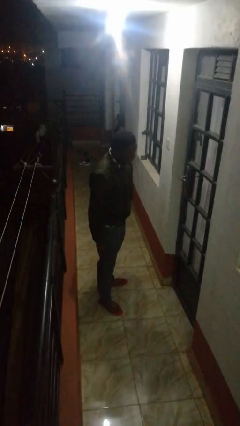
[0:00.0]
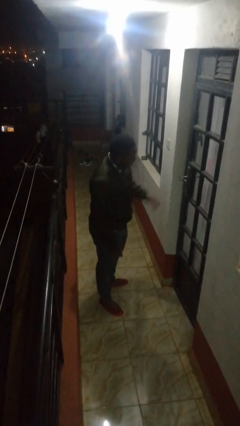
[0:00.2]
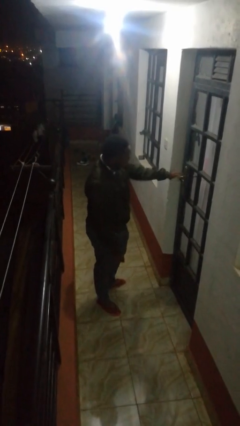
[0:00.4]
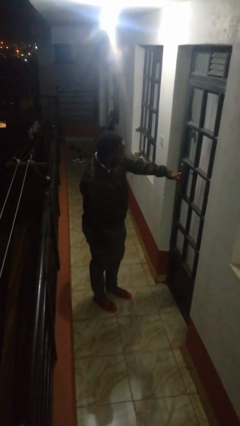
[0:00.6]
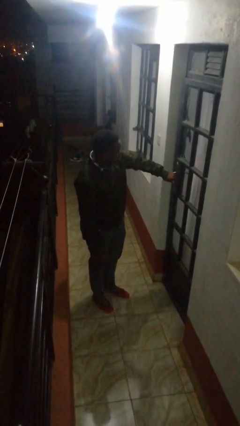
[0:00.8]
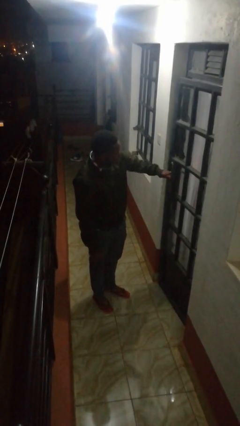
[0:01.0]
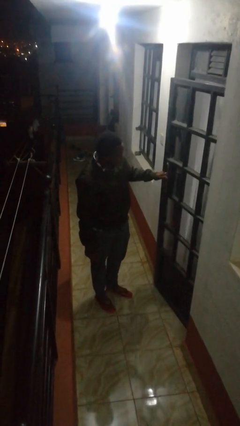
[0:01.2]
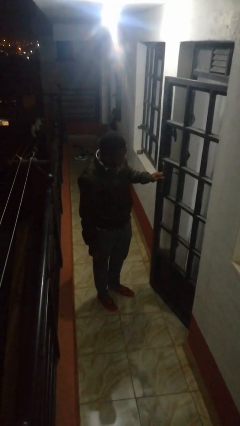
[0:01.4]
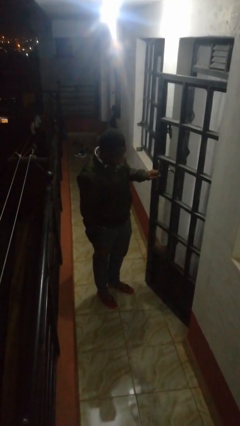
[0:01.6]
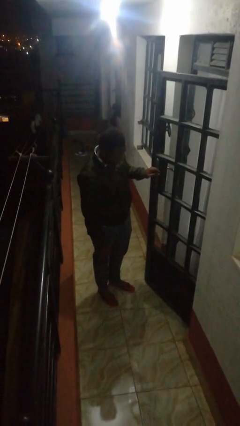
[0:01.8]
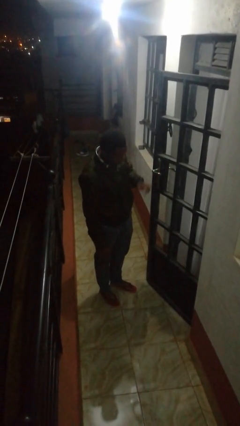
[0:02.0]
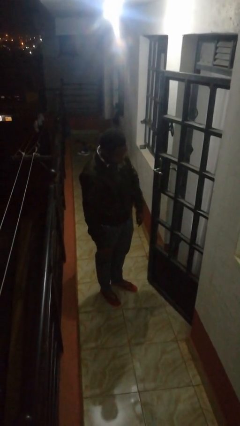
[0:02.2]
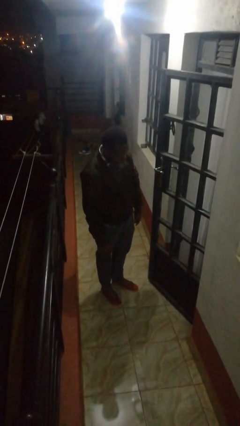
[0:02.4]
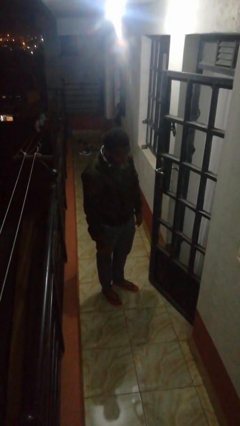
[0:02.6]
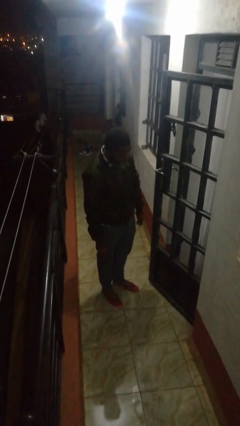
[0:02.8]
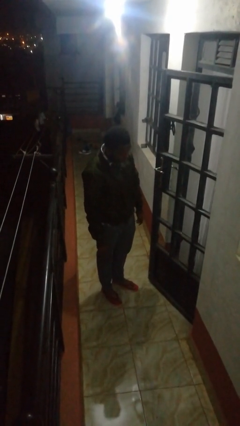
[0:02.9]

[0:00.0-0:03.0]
person opens facility door

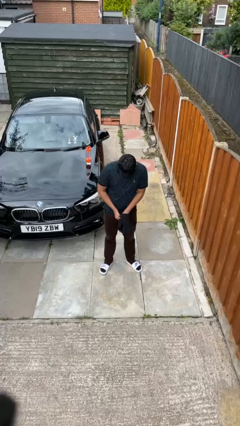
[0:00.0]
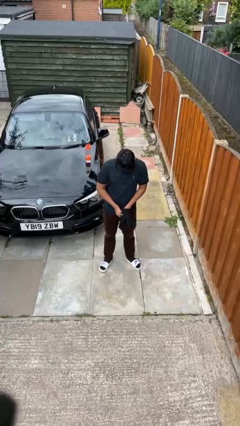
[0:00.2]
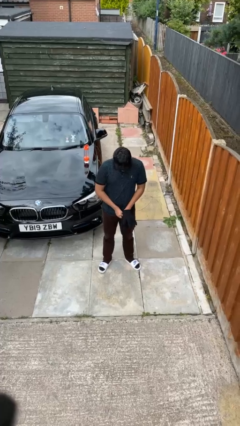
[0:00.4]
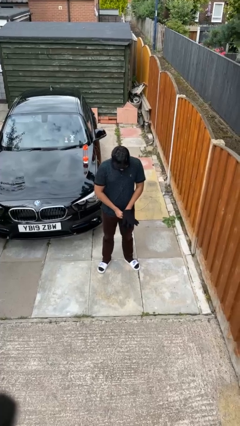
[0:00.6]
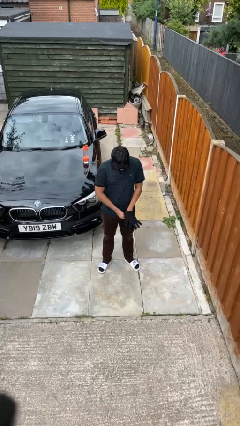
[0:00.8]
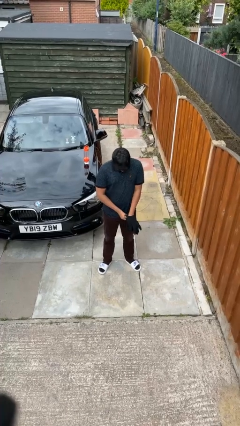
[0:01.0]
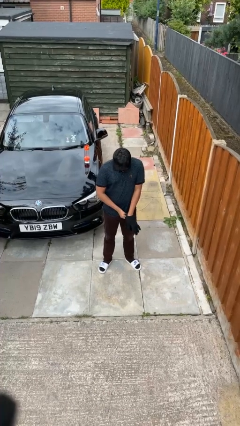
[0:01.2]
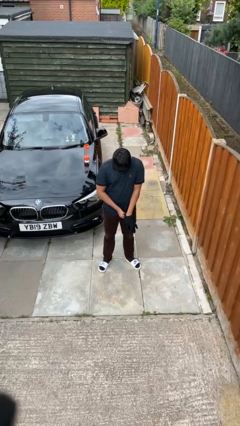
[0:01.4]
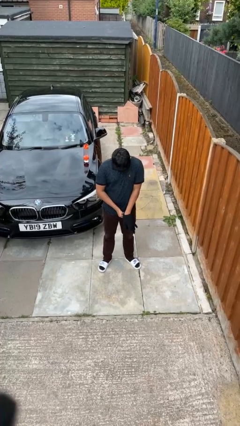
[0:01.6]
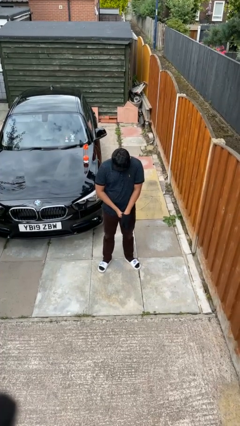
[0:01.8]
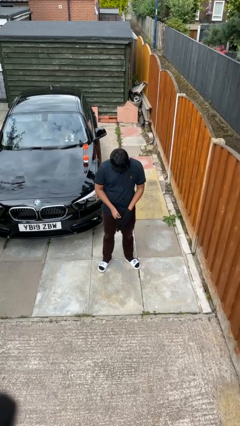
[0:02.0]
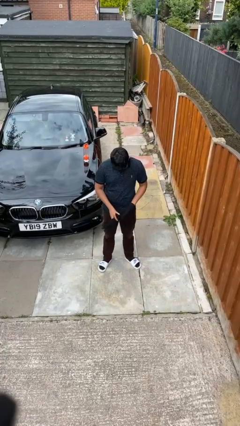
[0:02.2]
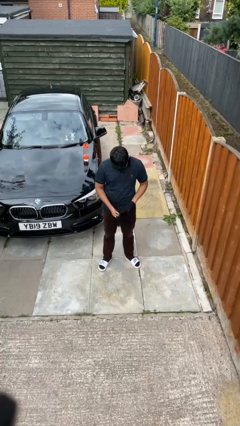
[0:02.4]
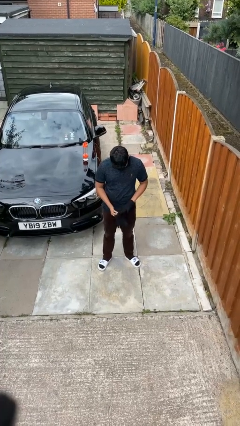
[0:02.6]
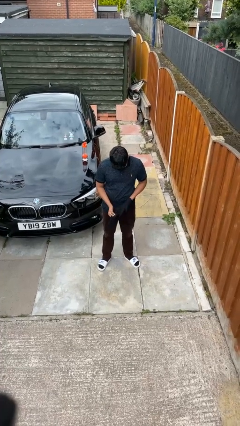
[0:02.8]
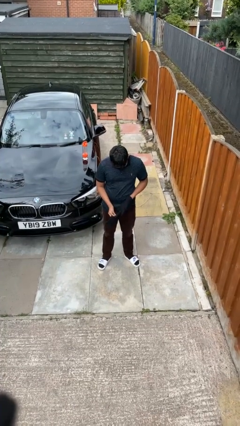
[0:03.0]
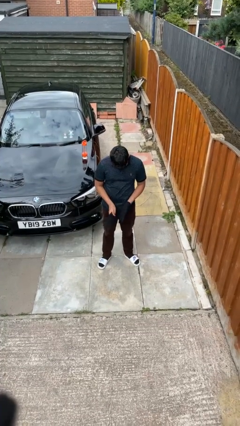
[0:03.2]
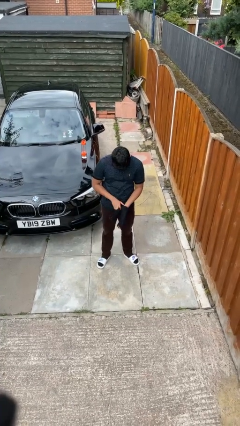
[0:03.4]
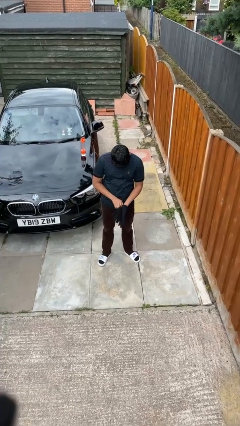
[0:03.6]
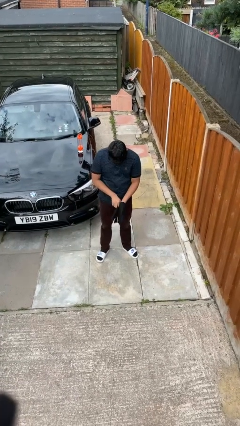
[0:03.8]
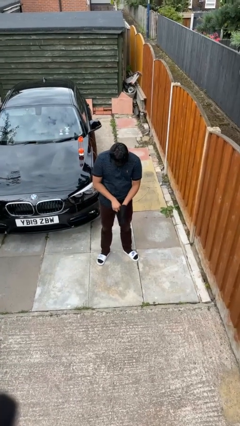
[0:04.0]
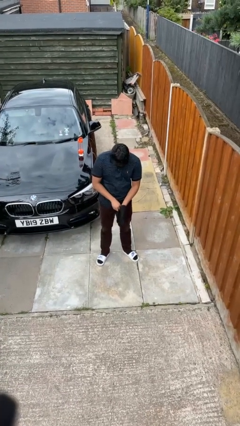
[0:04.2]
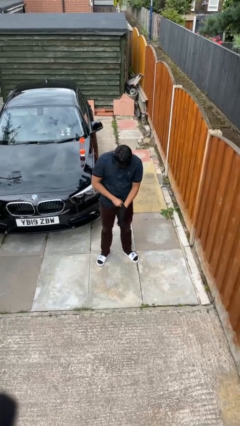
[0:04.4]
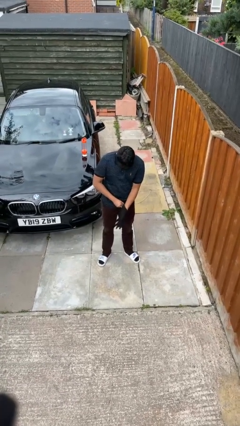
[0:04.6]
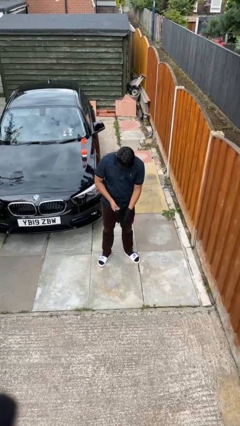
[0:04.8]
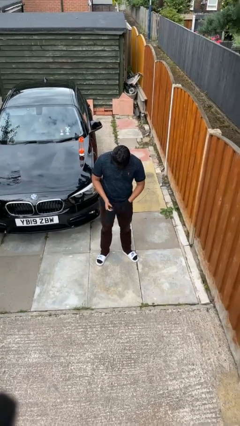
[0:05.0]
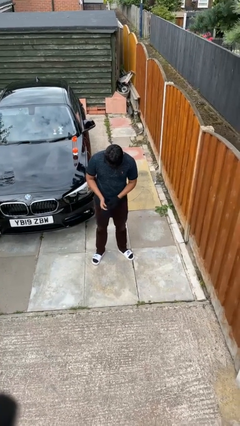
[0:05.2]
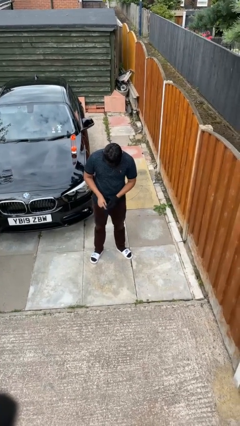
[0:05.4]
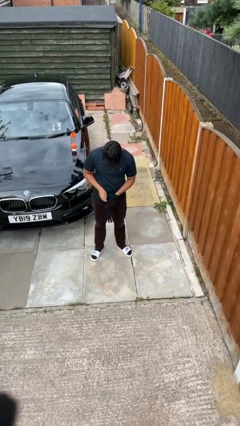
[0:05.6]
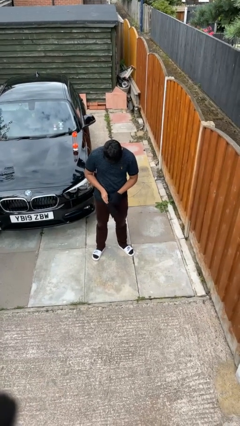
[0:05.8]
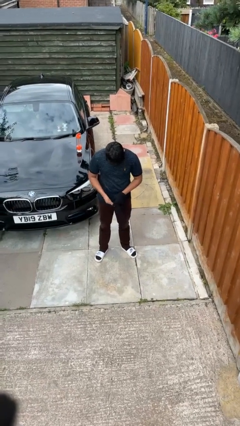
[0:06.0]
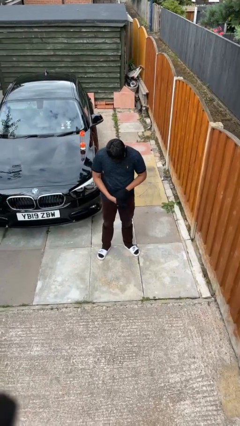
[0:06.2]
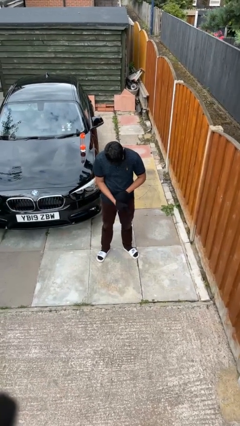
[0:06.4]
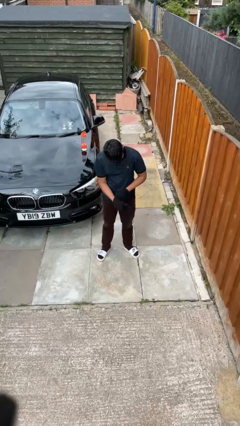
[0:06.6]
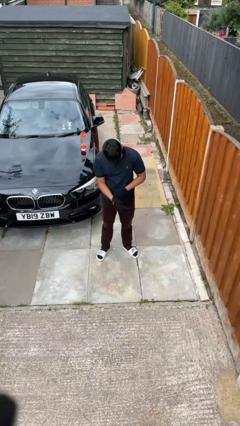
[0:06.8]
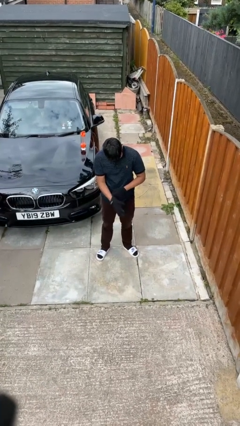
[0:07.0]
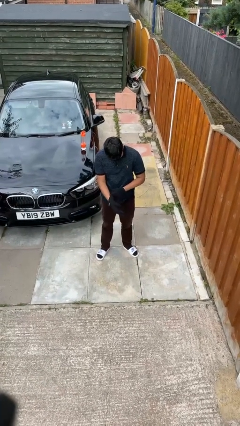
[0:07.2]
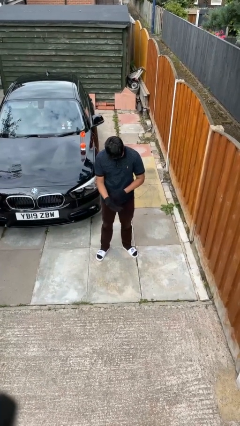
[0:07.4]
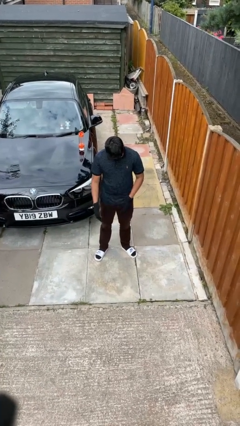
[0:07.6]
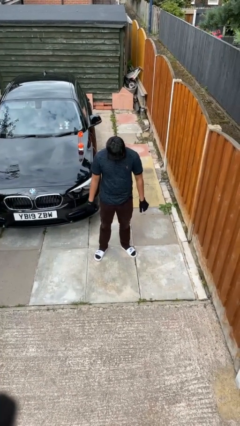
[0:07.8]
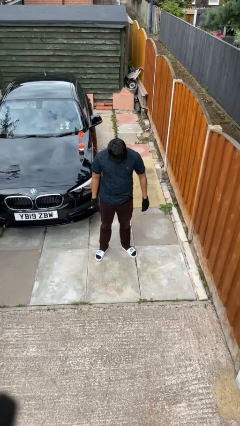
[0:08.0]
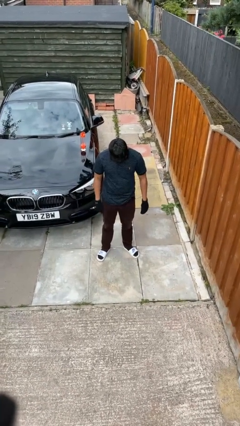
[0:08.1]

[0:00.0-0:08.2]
person puts on gloves

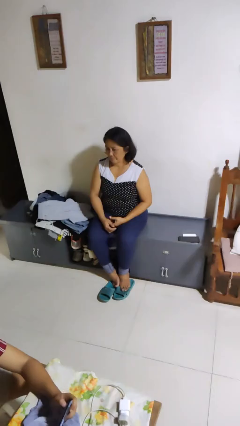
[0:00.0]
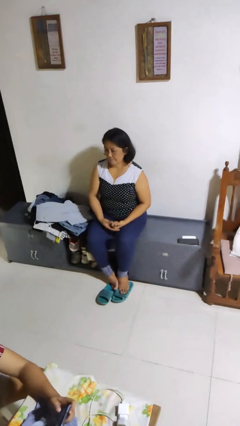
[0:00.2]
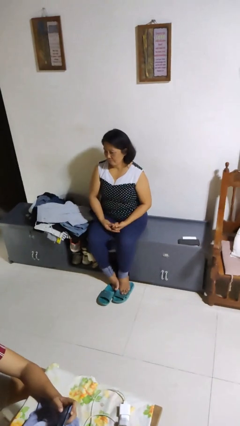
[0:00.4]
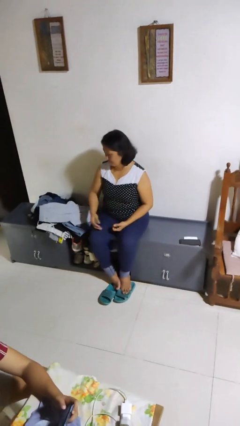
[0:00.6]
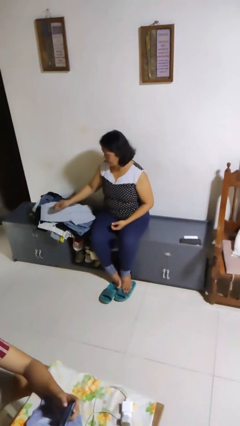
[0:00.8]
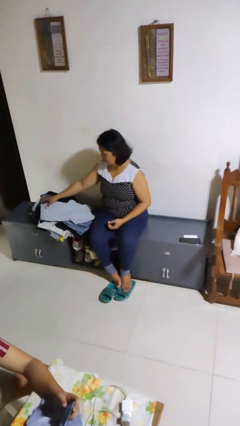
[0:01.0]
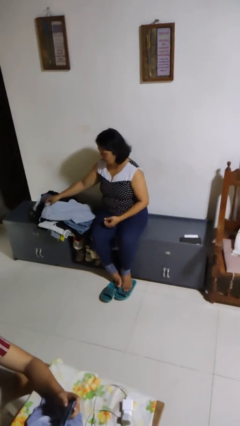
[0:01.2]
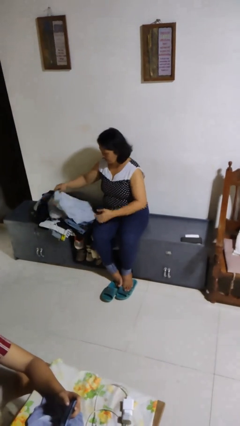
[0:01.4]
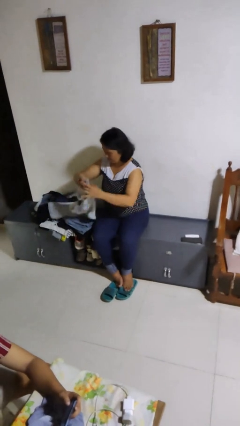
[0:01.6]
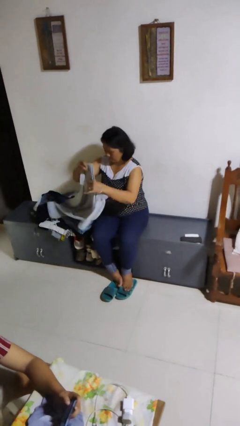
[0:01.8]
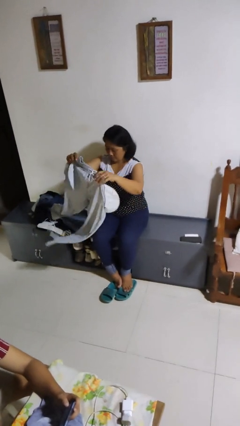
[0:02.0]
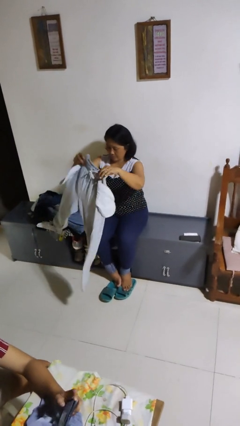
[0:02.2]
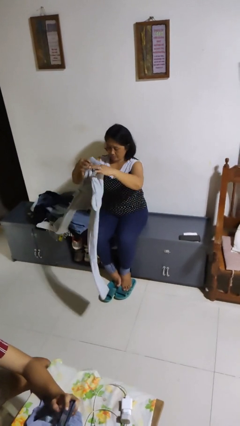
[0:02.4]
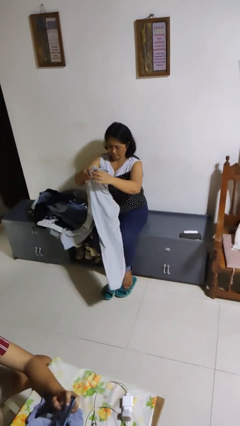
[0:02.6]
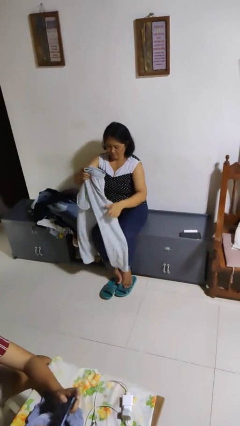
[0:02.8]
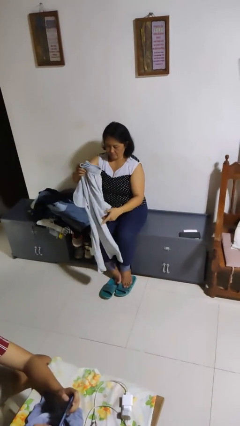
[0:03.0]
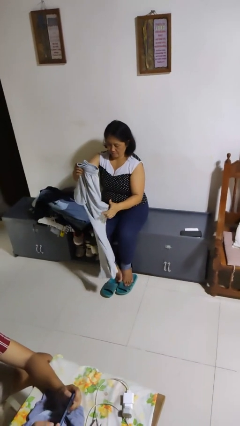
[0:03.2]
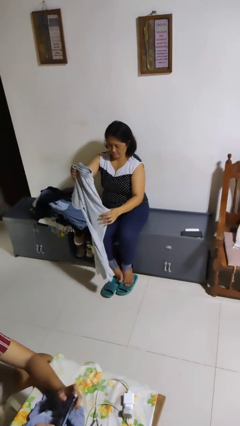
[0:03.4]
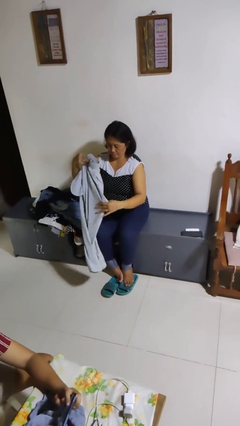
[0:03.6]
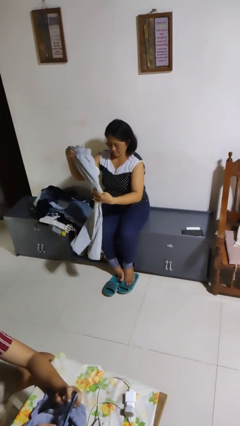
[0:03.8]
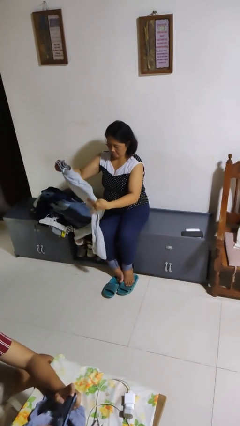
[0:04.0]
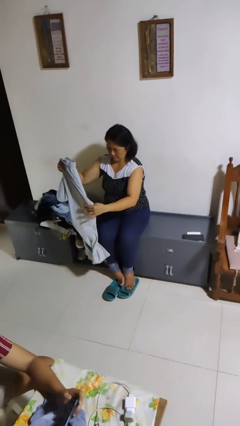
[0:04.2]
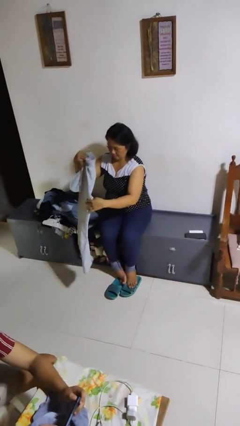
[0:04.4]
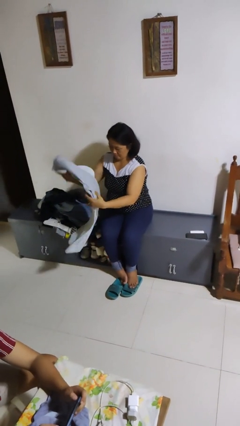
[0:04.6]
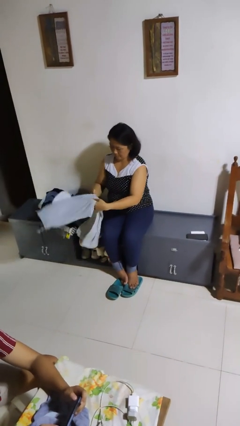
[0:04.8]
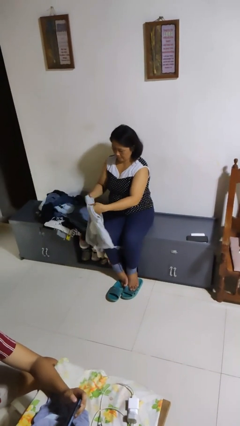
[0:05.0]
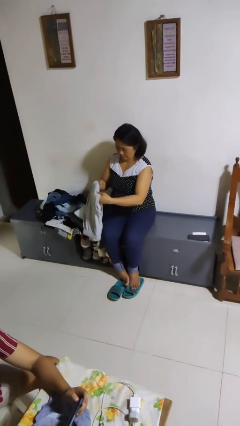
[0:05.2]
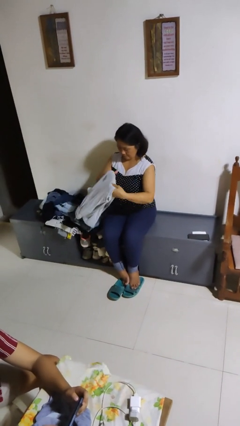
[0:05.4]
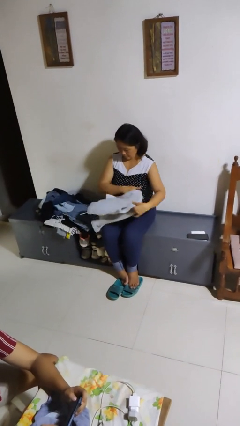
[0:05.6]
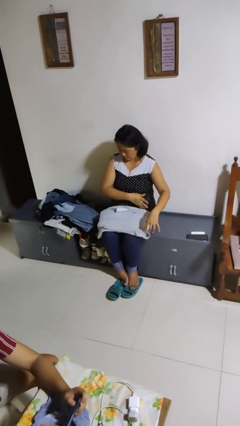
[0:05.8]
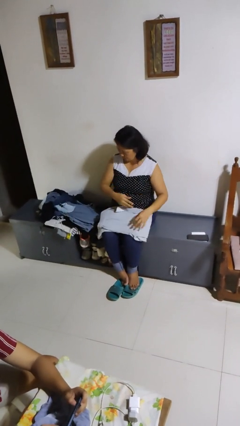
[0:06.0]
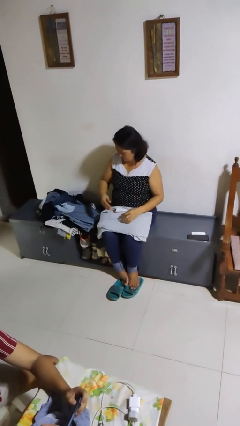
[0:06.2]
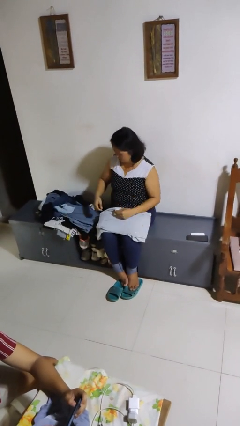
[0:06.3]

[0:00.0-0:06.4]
person folds pants

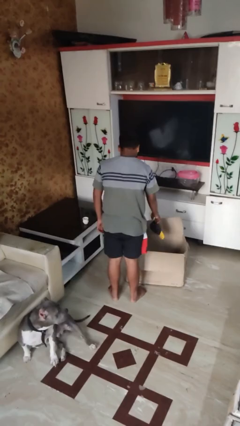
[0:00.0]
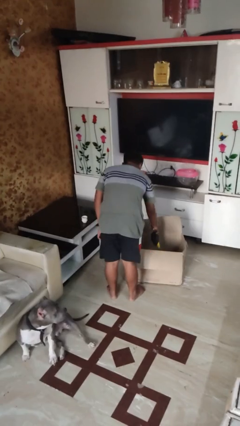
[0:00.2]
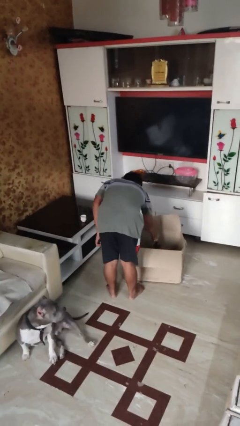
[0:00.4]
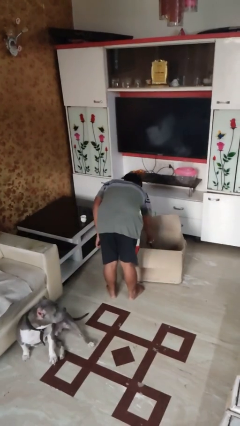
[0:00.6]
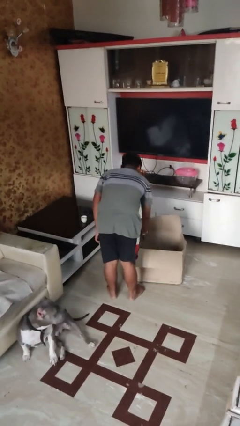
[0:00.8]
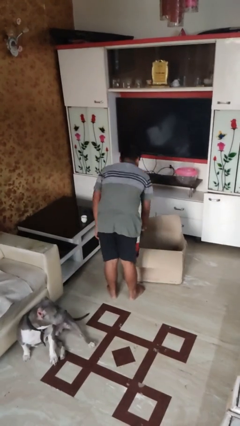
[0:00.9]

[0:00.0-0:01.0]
person puts object into box
